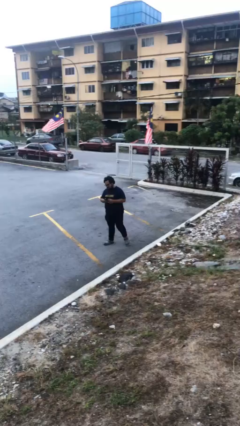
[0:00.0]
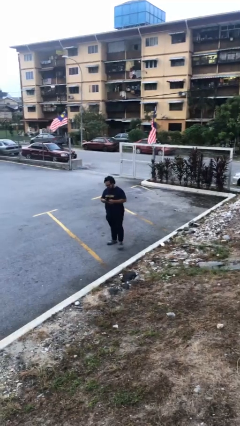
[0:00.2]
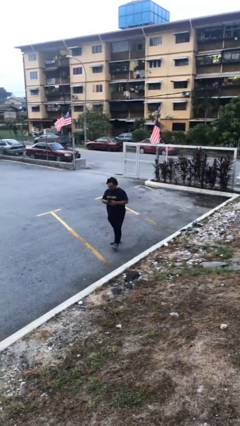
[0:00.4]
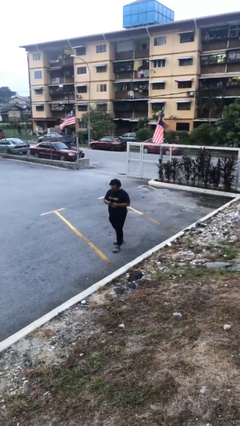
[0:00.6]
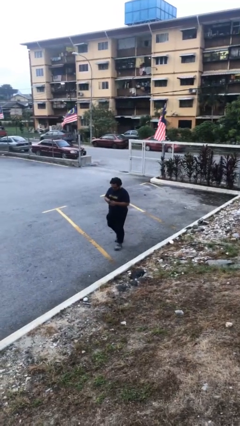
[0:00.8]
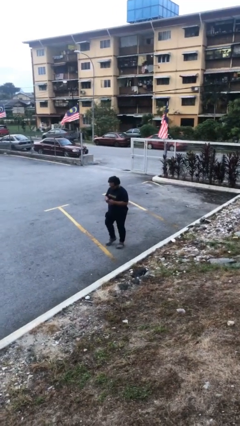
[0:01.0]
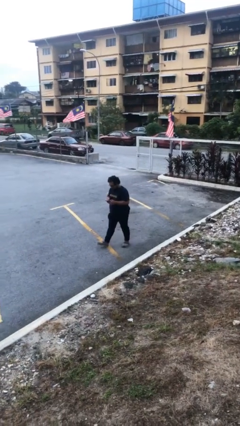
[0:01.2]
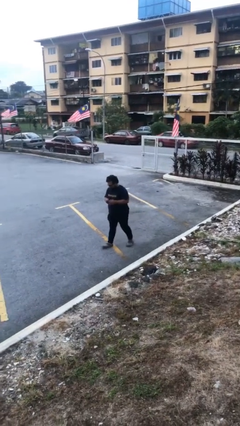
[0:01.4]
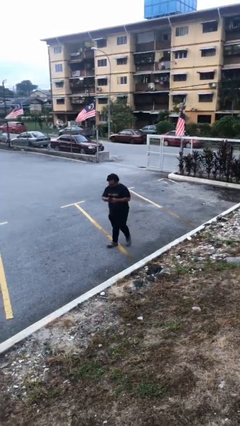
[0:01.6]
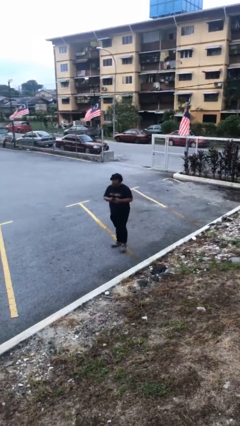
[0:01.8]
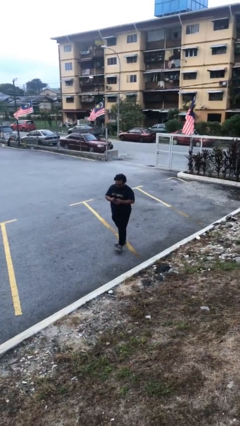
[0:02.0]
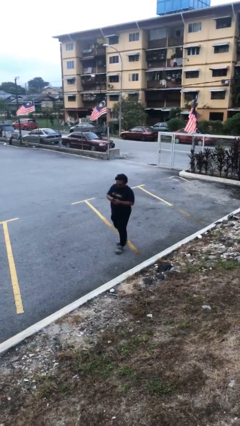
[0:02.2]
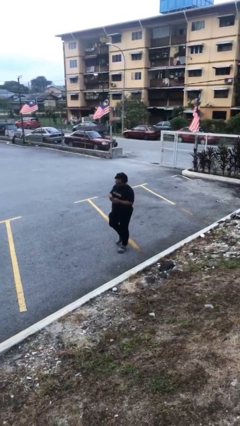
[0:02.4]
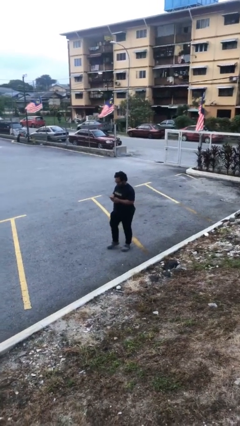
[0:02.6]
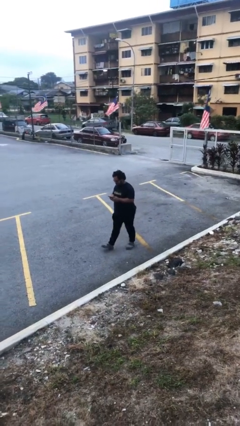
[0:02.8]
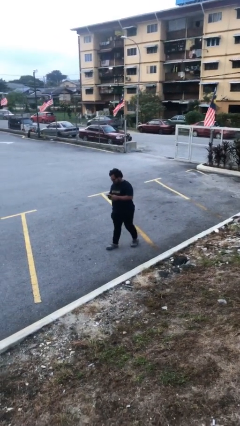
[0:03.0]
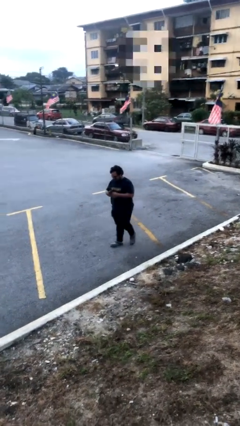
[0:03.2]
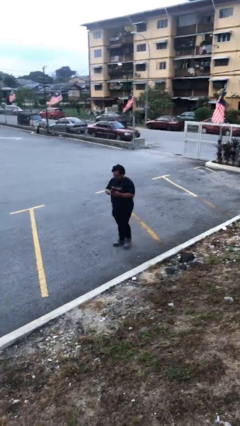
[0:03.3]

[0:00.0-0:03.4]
person texts on phone

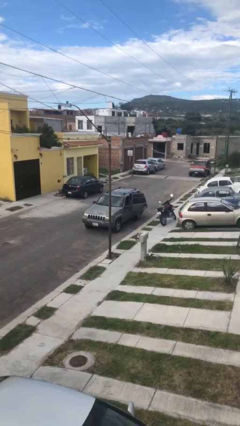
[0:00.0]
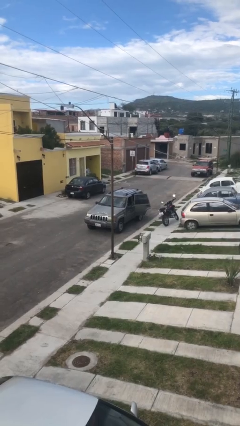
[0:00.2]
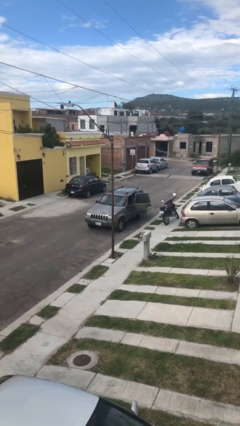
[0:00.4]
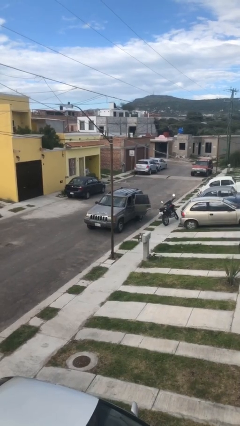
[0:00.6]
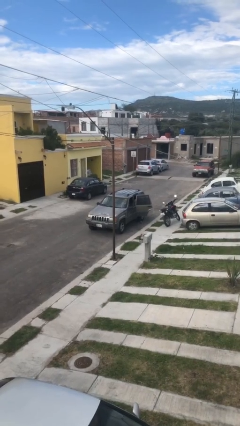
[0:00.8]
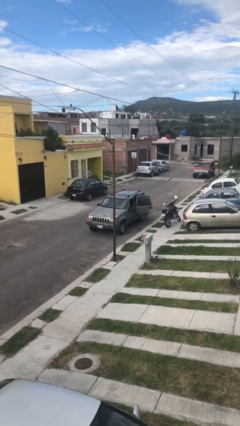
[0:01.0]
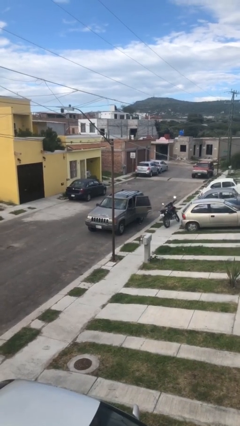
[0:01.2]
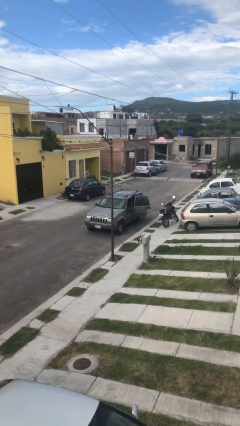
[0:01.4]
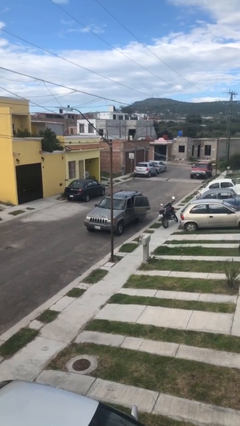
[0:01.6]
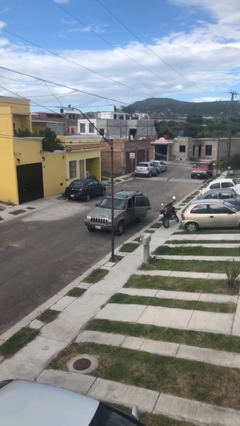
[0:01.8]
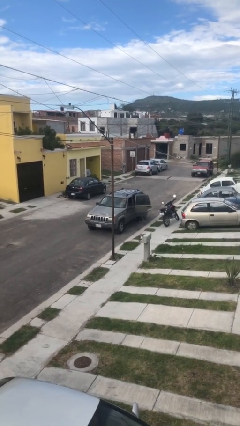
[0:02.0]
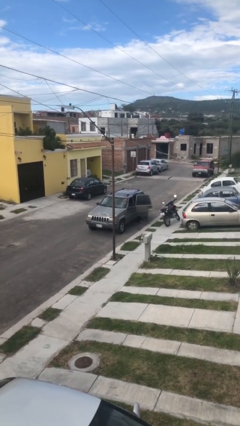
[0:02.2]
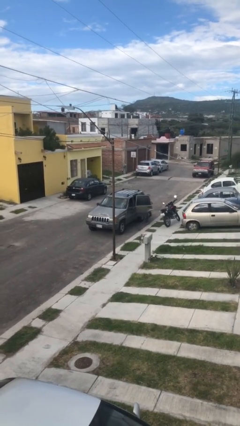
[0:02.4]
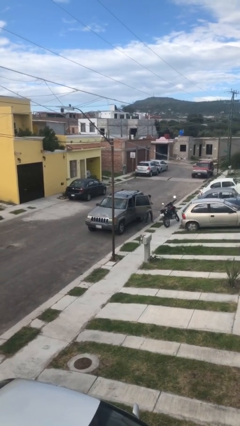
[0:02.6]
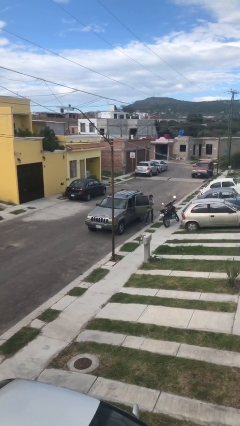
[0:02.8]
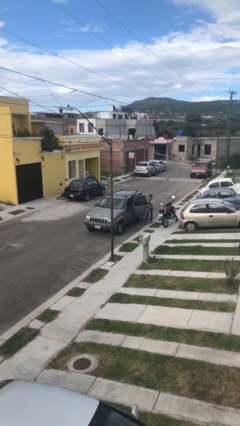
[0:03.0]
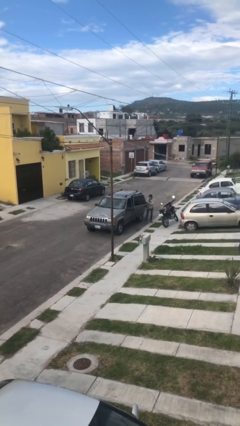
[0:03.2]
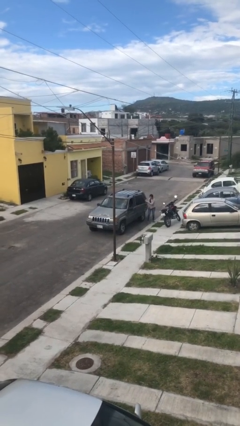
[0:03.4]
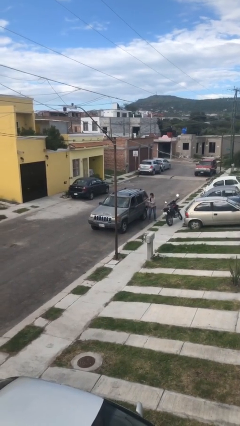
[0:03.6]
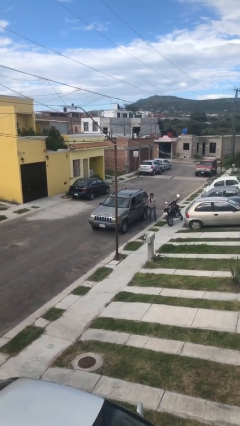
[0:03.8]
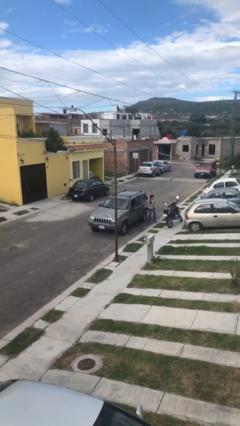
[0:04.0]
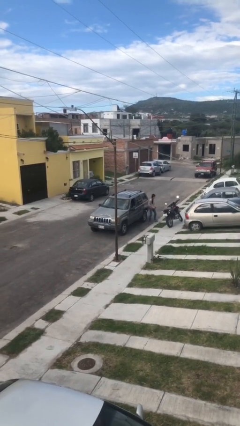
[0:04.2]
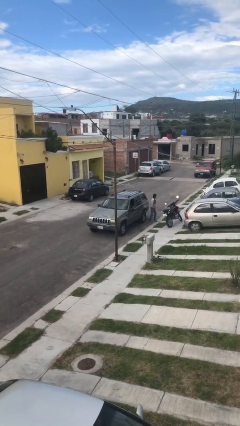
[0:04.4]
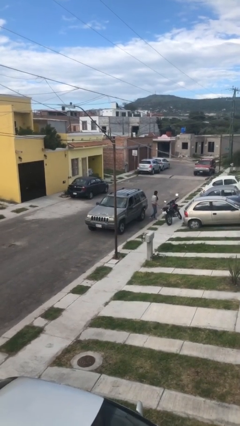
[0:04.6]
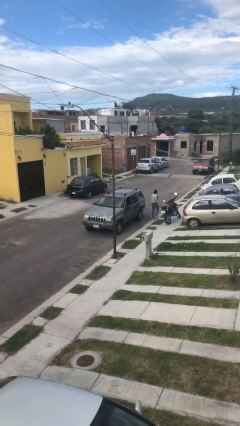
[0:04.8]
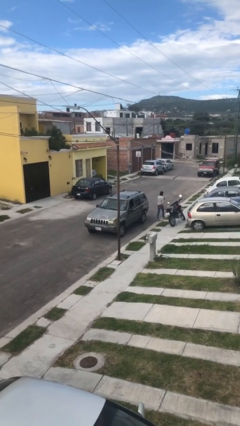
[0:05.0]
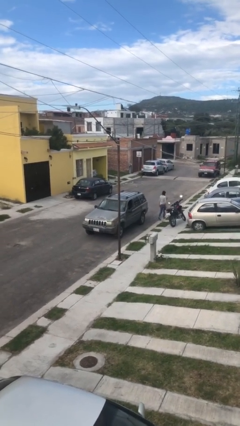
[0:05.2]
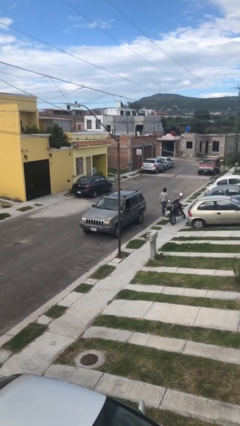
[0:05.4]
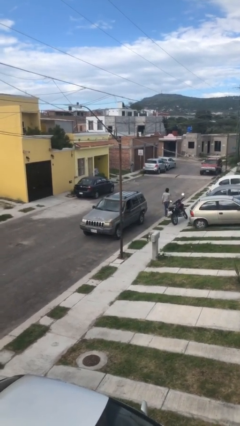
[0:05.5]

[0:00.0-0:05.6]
car drops off person

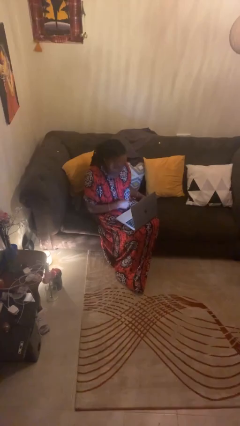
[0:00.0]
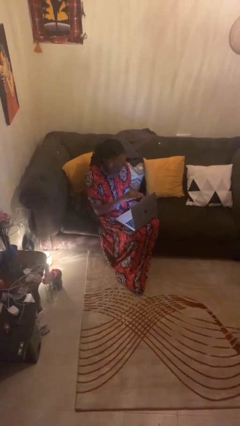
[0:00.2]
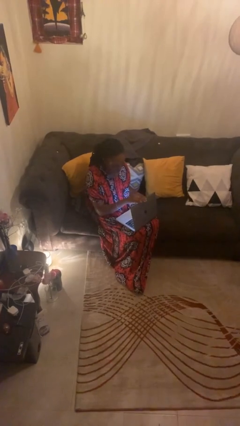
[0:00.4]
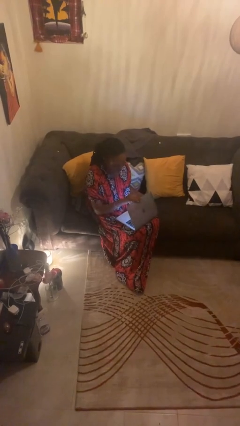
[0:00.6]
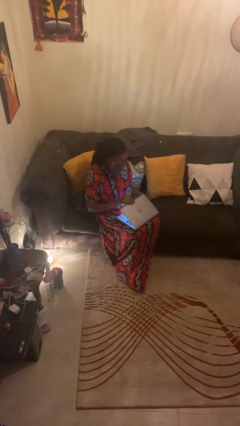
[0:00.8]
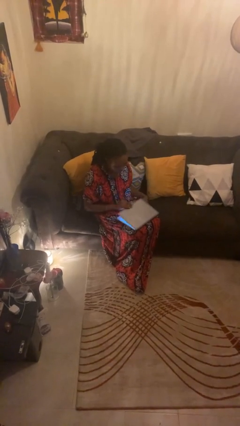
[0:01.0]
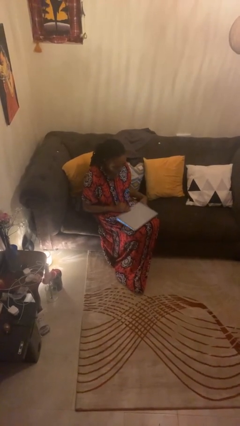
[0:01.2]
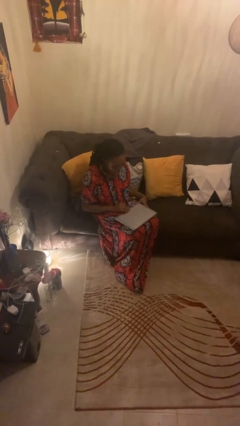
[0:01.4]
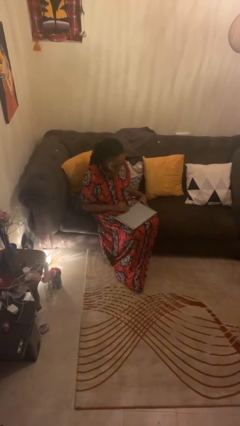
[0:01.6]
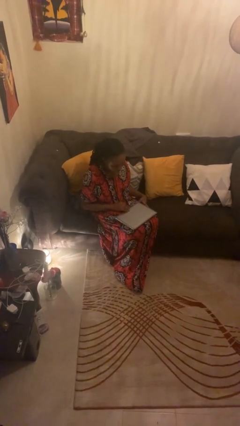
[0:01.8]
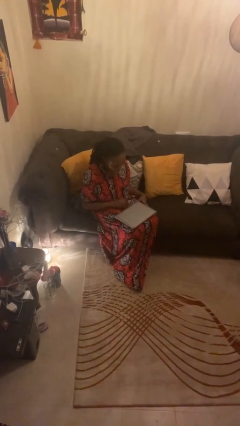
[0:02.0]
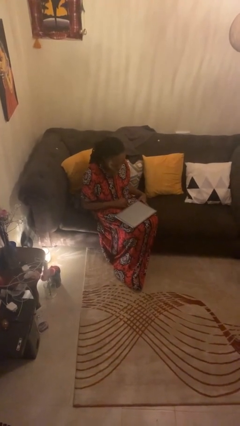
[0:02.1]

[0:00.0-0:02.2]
person closes laptop

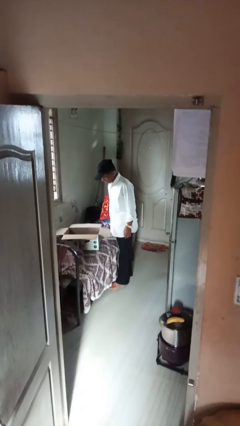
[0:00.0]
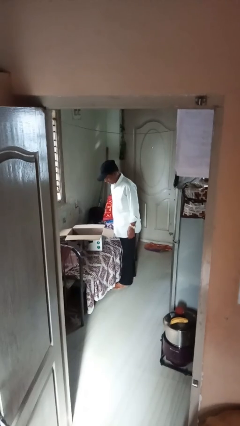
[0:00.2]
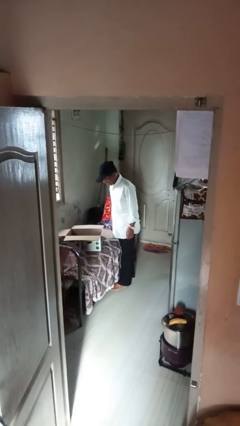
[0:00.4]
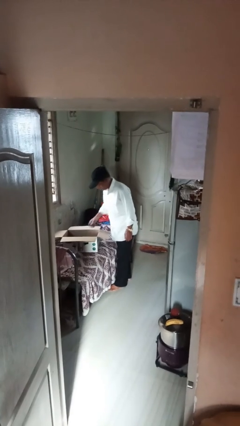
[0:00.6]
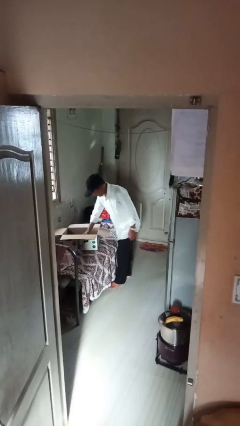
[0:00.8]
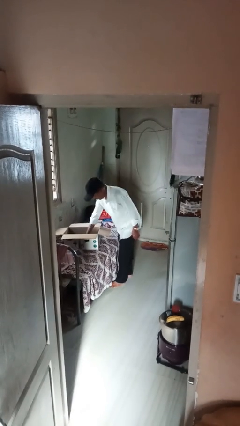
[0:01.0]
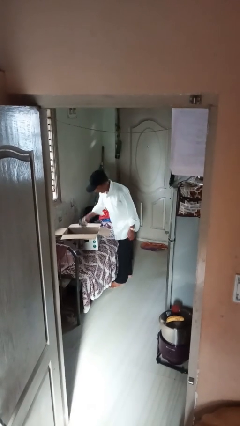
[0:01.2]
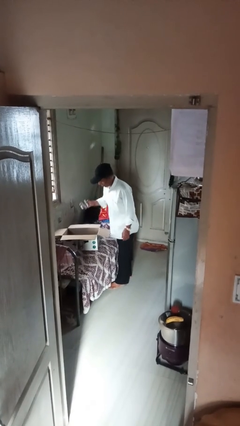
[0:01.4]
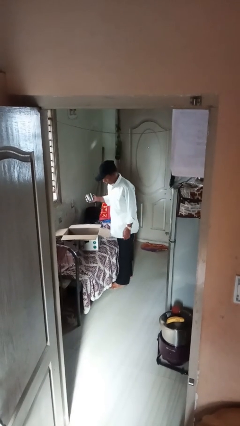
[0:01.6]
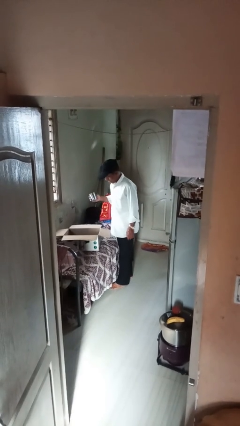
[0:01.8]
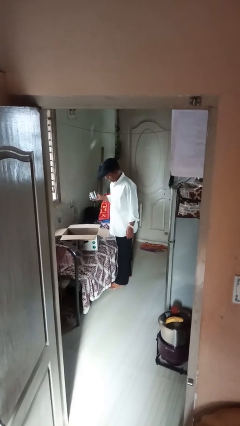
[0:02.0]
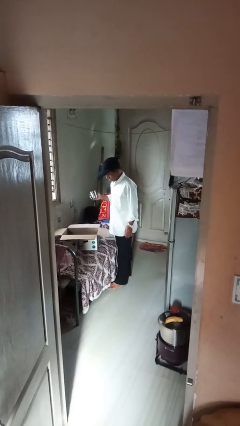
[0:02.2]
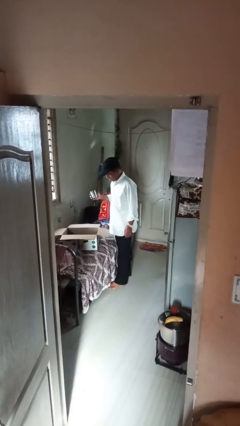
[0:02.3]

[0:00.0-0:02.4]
person takes object from box

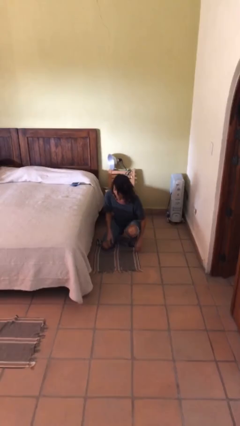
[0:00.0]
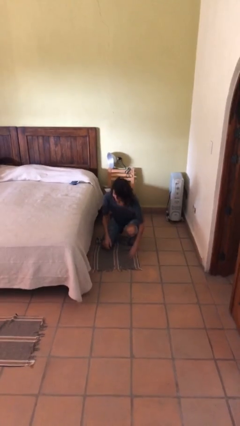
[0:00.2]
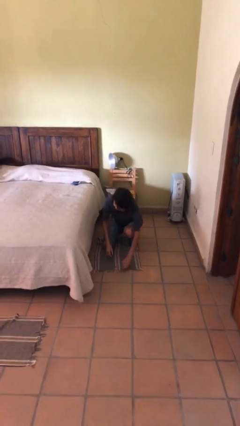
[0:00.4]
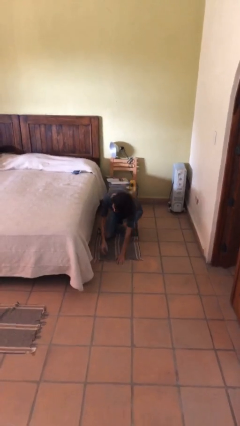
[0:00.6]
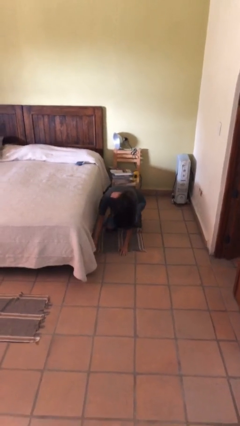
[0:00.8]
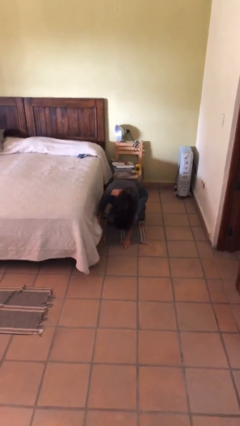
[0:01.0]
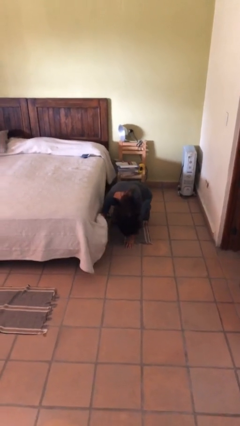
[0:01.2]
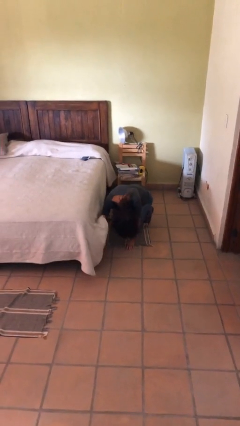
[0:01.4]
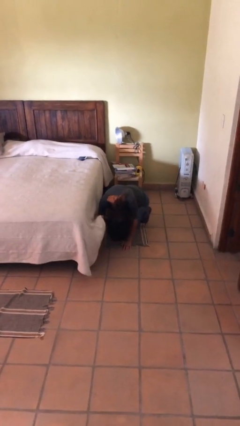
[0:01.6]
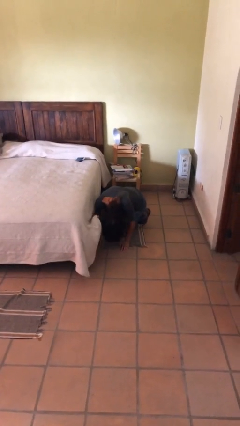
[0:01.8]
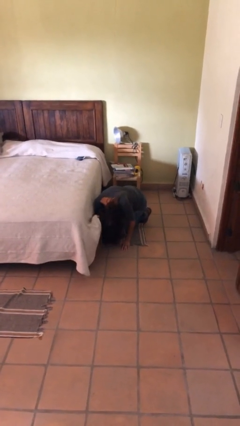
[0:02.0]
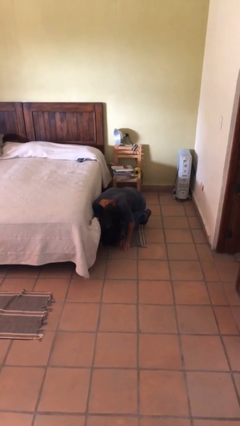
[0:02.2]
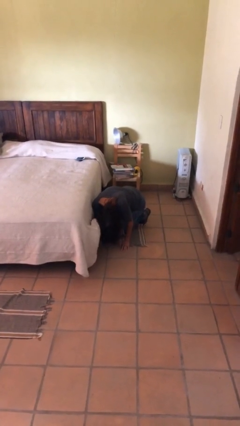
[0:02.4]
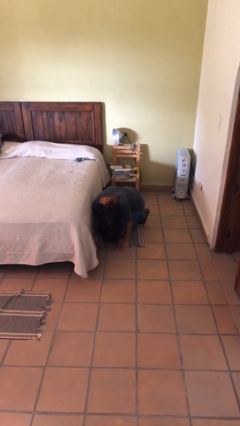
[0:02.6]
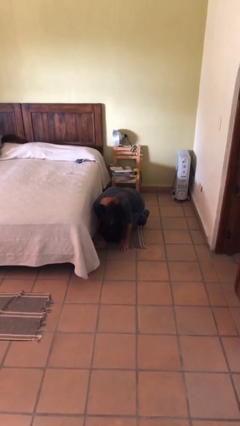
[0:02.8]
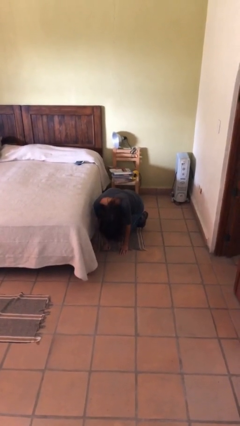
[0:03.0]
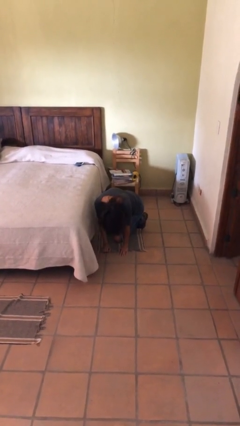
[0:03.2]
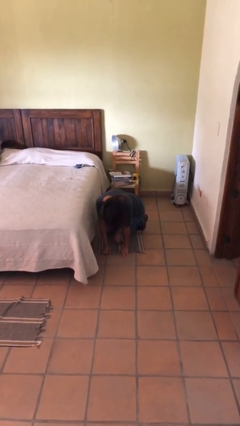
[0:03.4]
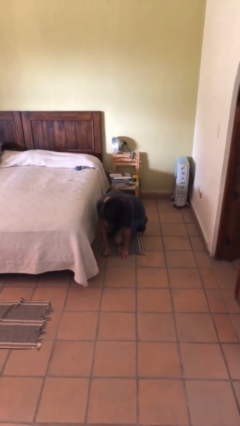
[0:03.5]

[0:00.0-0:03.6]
person searches under bed

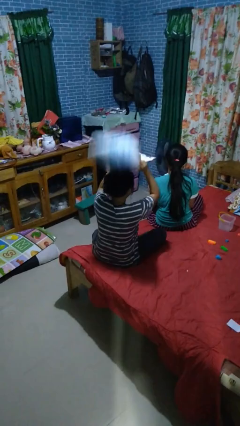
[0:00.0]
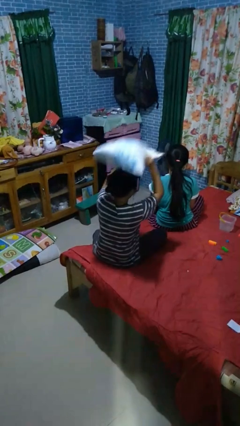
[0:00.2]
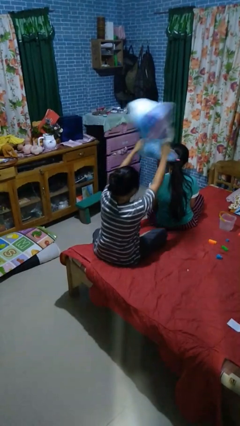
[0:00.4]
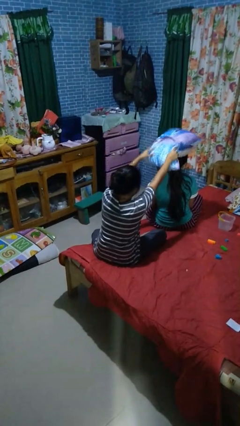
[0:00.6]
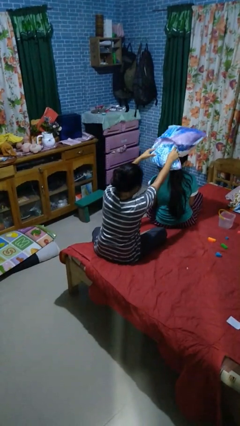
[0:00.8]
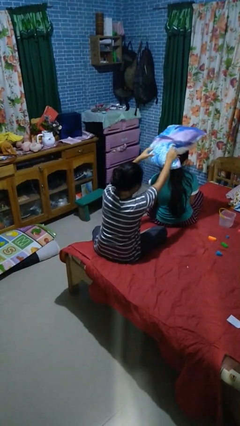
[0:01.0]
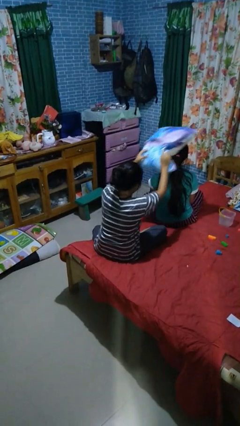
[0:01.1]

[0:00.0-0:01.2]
person hits person with pillow
